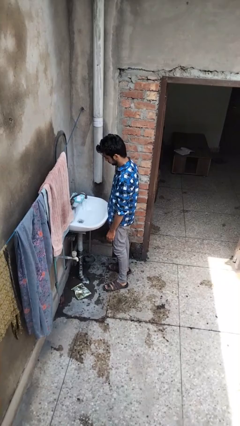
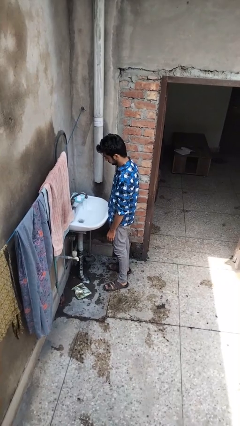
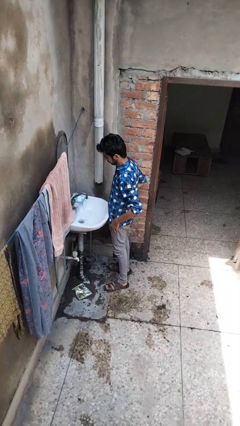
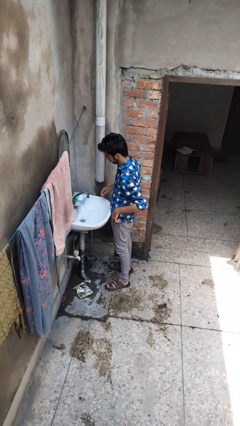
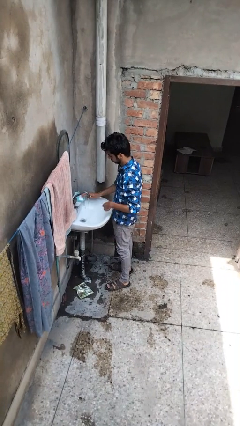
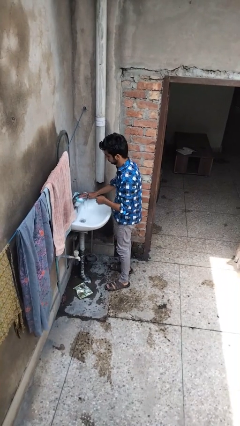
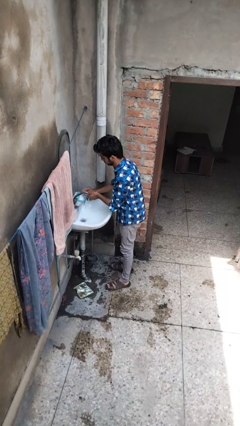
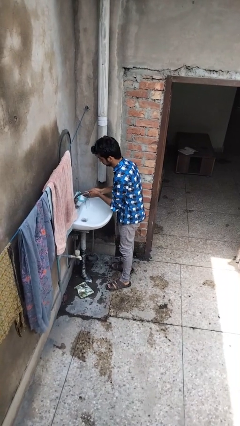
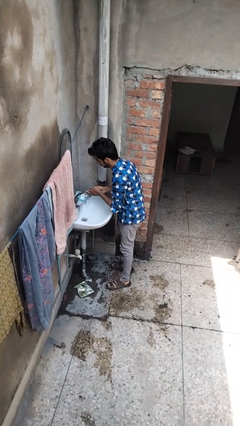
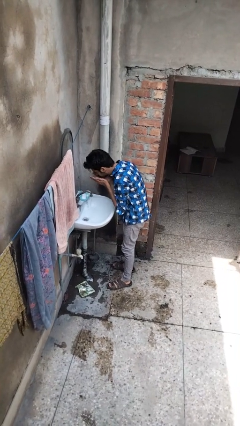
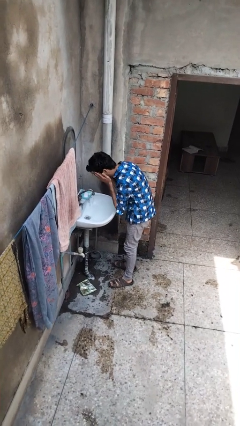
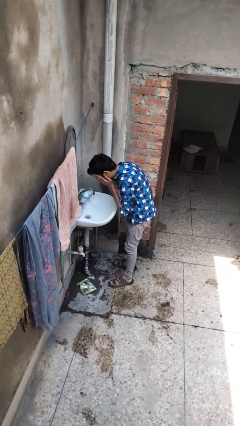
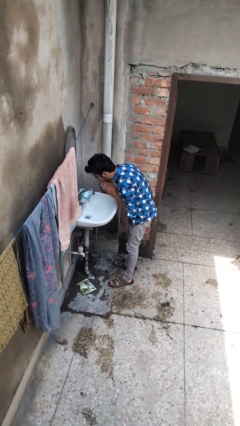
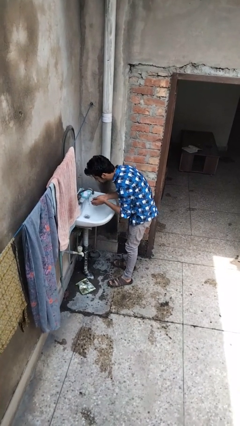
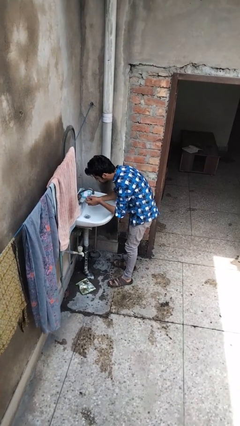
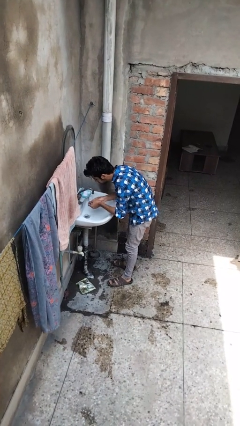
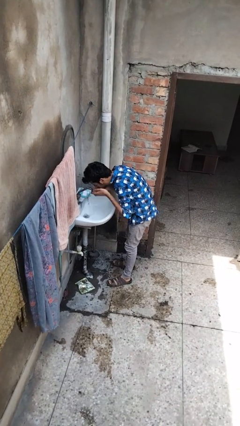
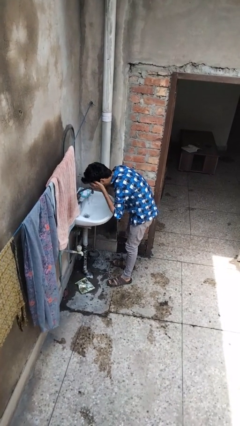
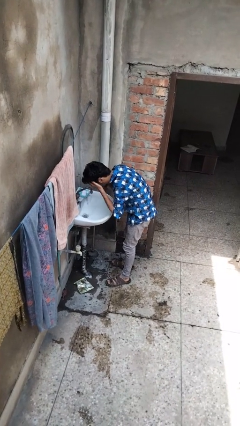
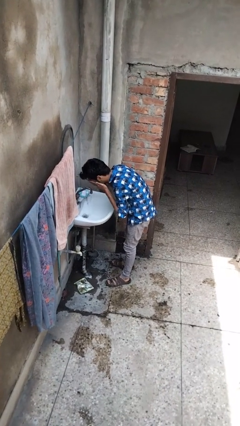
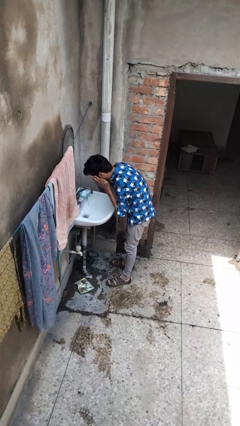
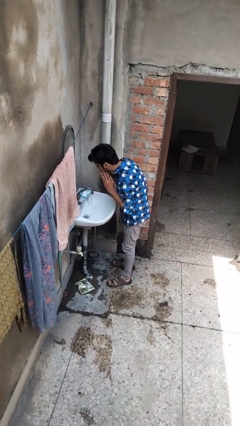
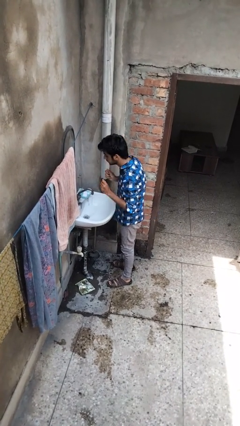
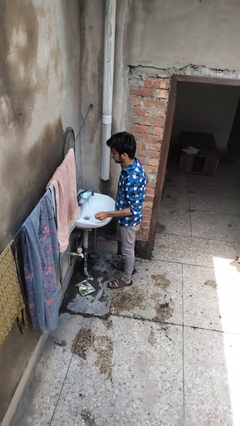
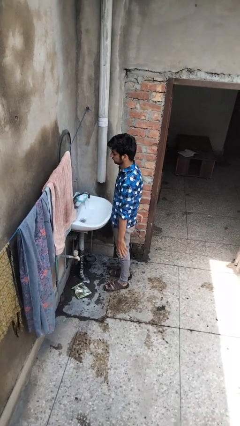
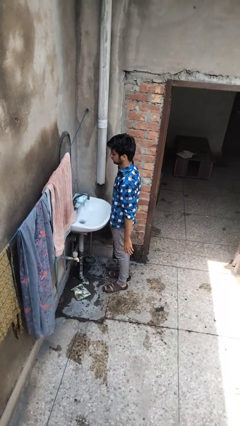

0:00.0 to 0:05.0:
person washes face

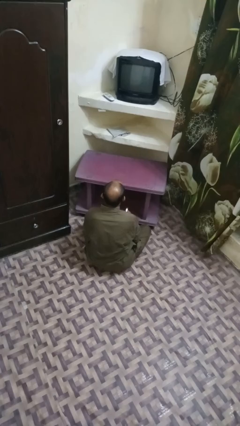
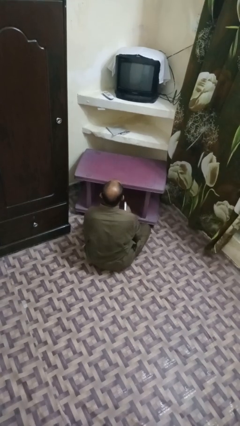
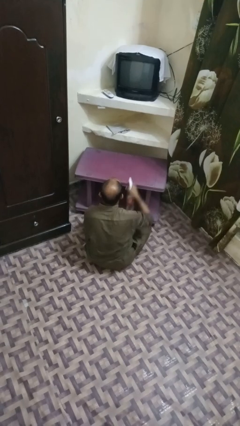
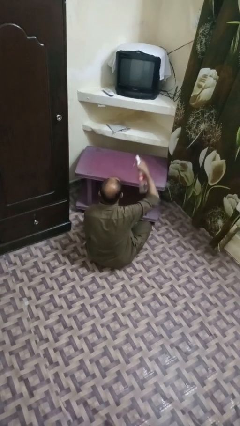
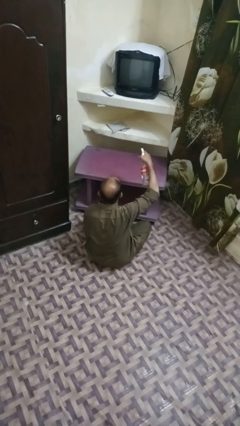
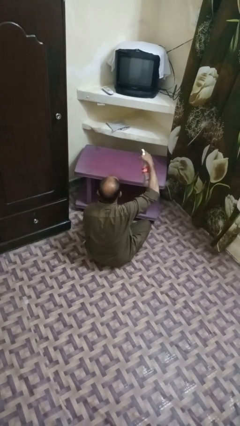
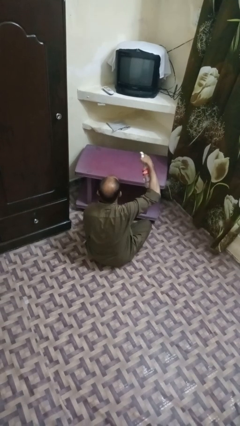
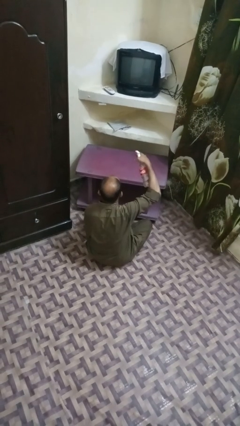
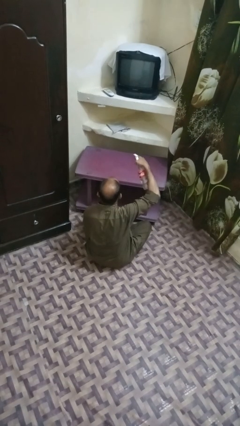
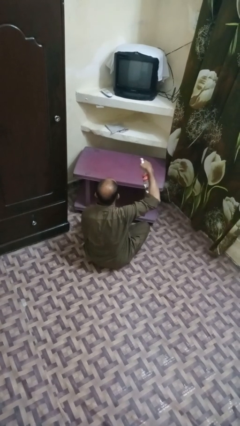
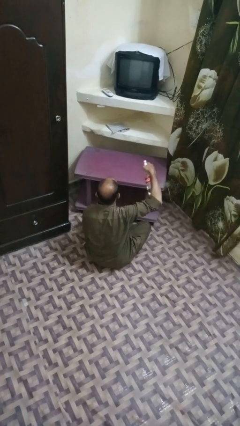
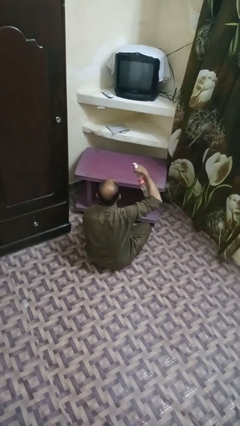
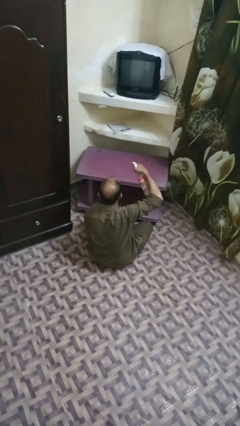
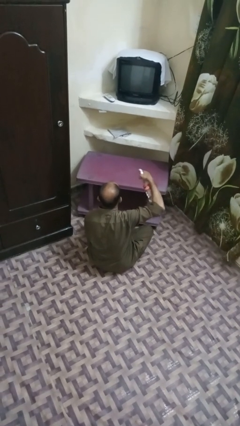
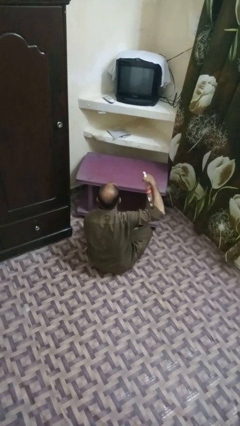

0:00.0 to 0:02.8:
person sprays from bottle

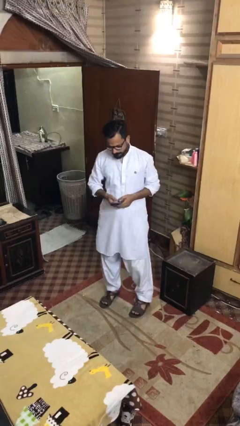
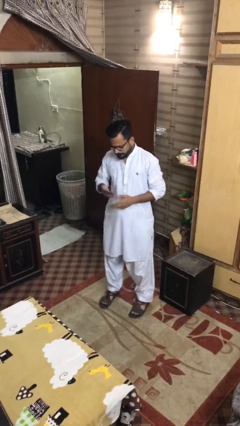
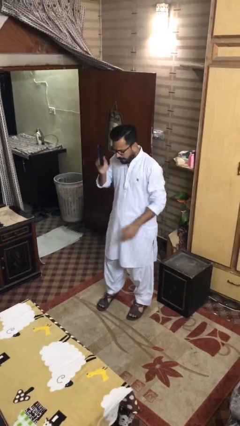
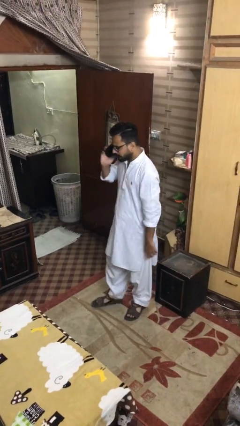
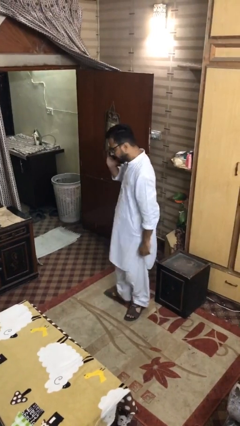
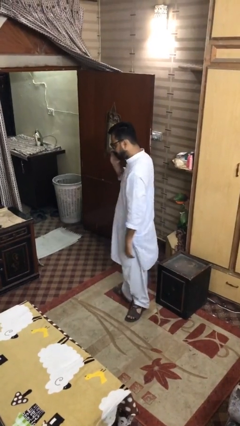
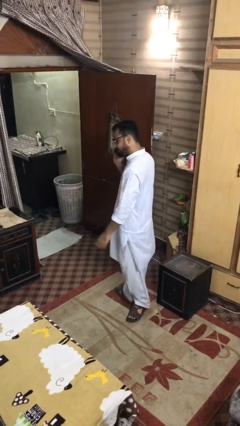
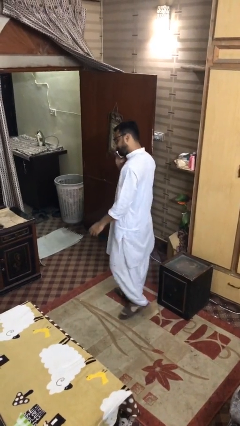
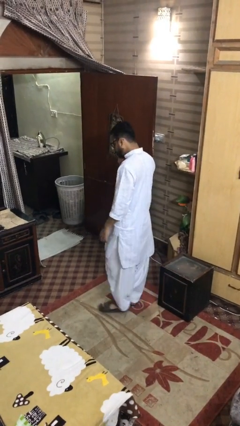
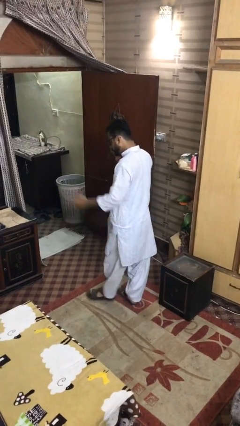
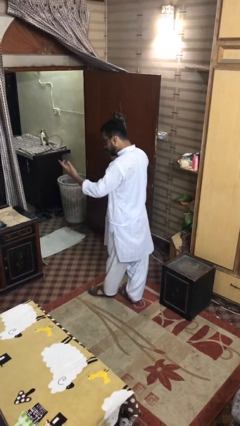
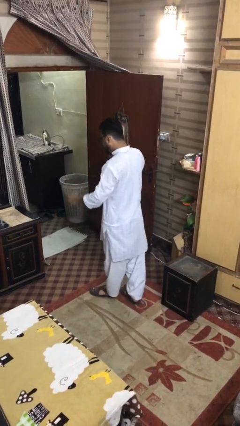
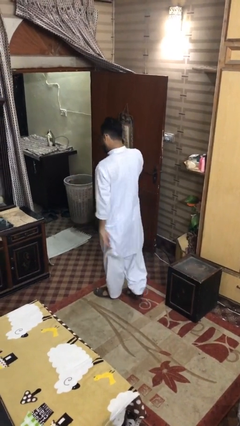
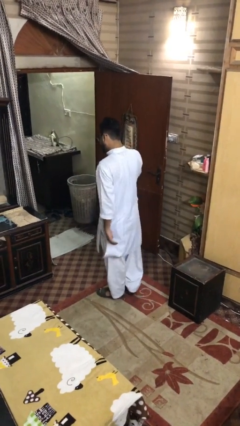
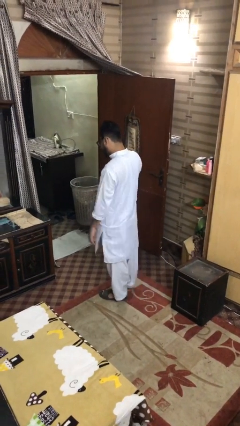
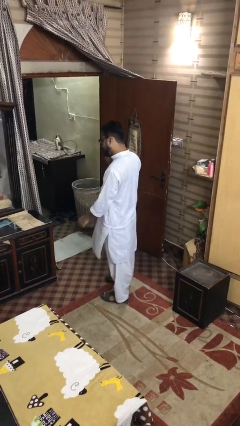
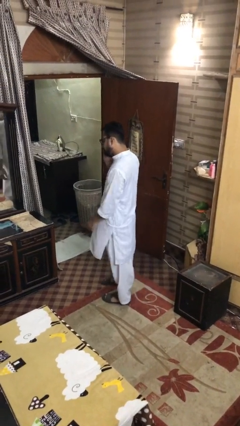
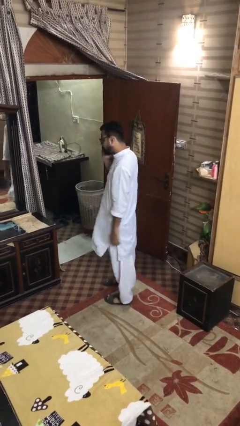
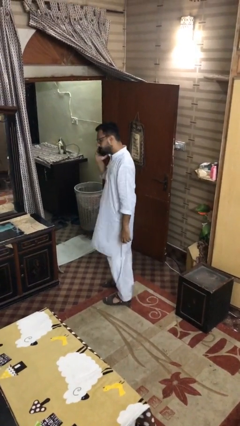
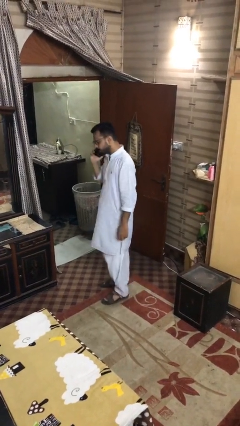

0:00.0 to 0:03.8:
person talks on phone

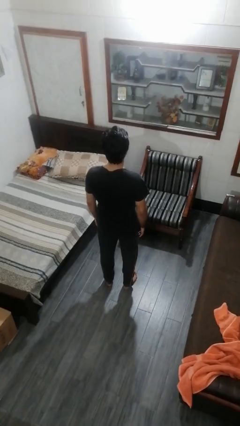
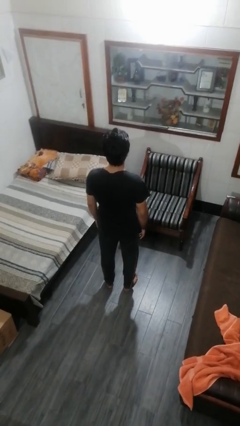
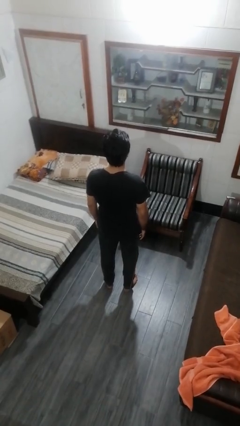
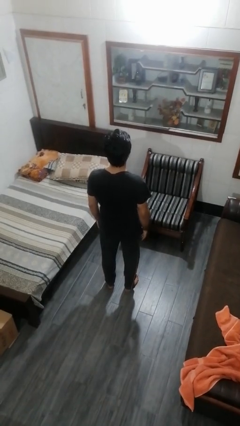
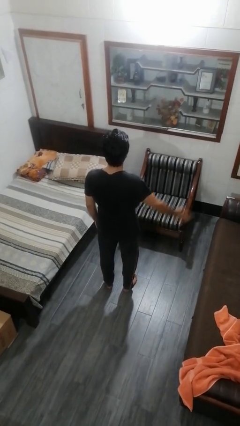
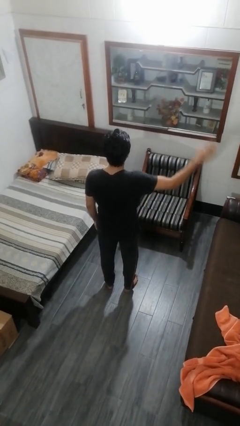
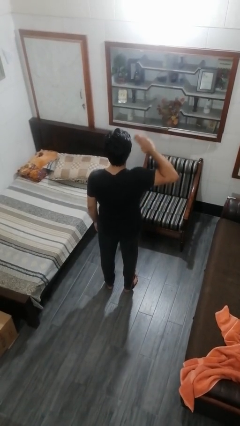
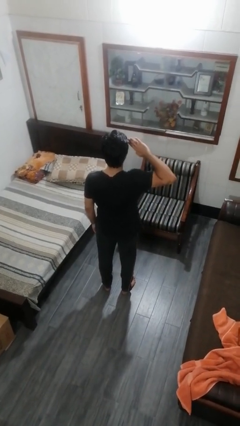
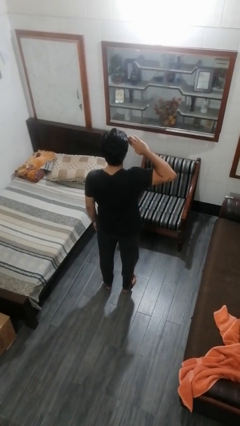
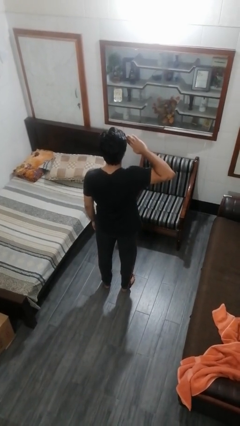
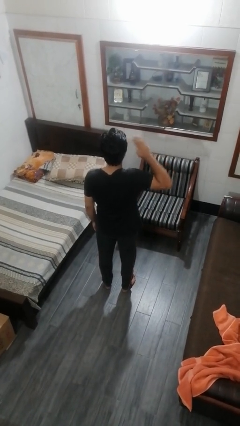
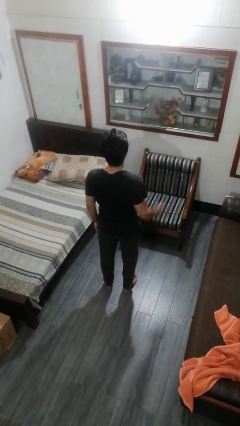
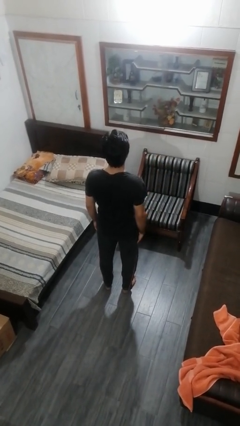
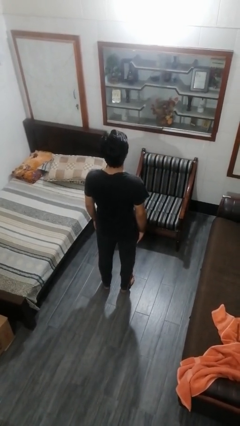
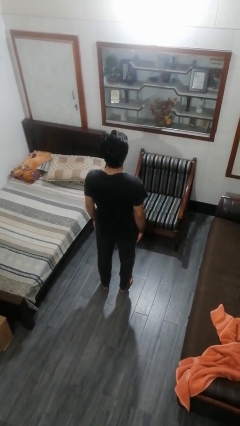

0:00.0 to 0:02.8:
person salutes

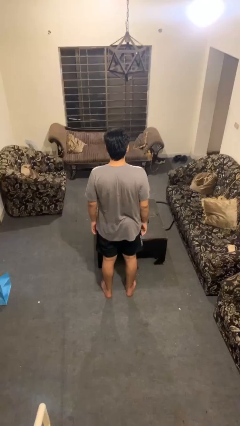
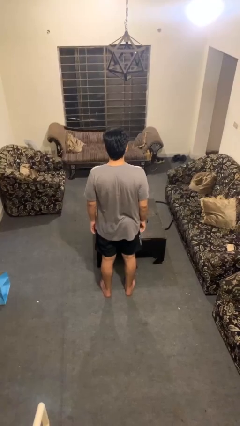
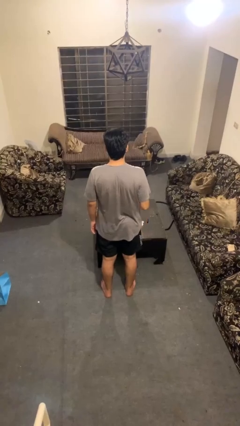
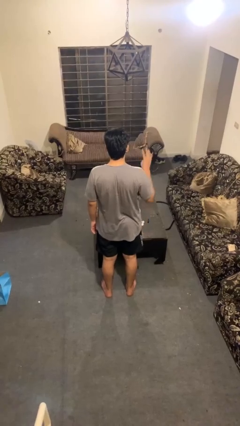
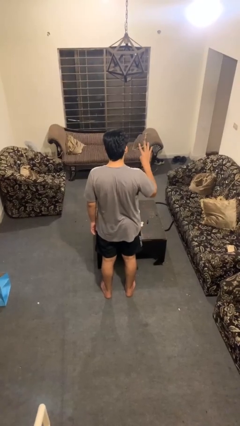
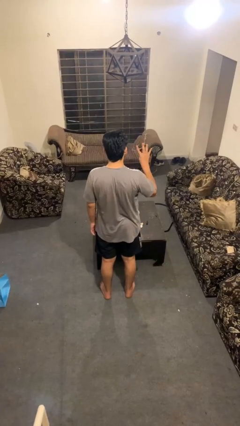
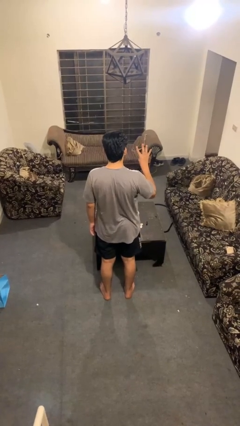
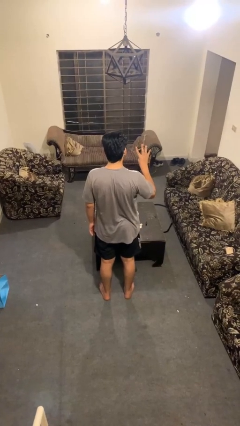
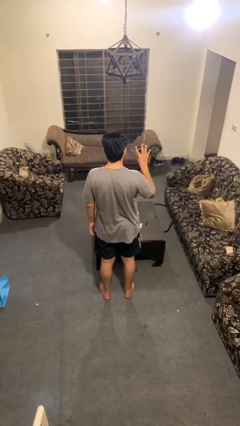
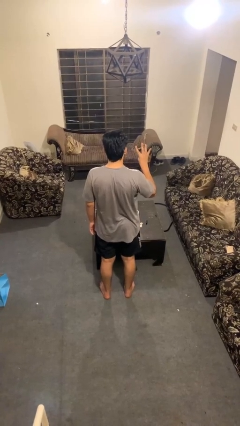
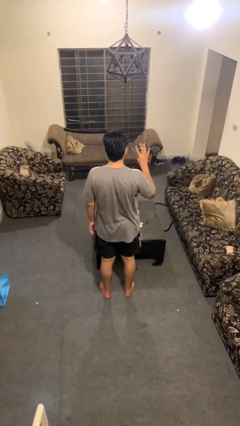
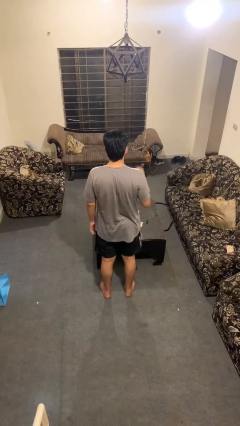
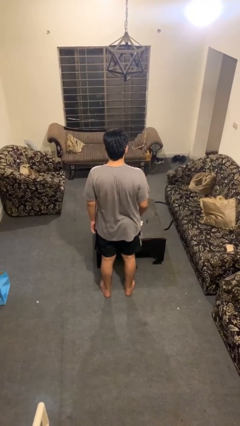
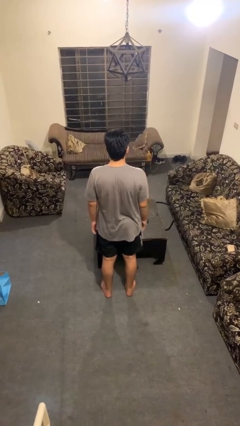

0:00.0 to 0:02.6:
person gestures number four

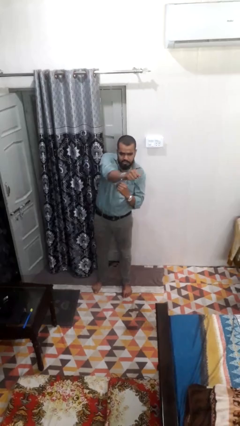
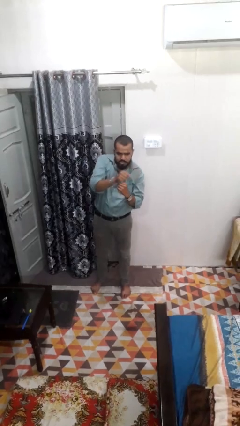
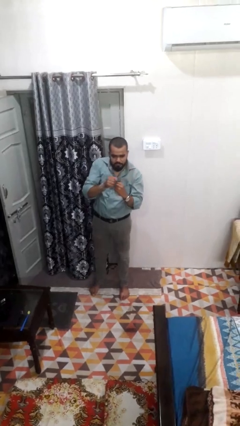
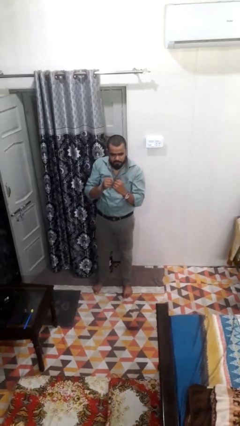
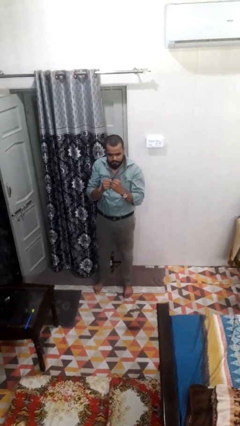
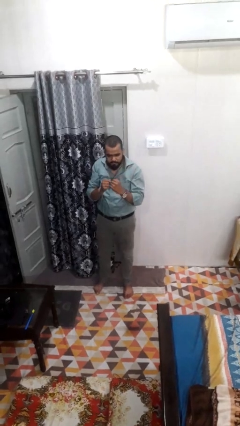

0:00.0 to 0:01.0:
person punches
